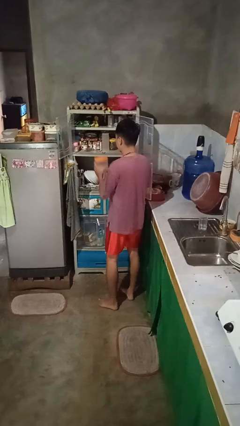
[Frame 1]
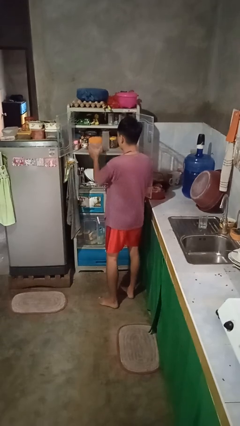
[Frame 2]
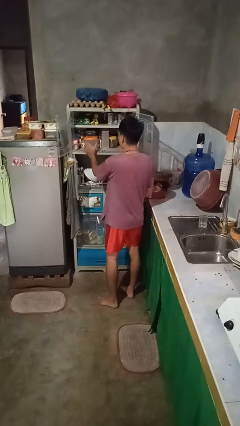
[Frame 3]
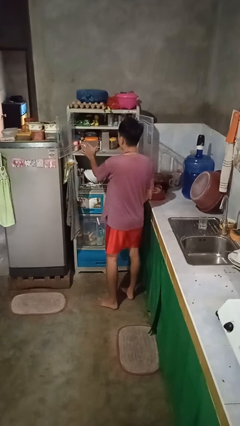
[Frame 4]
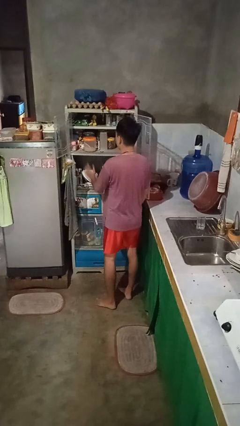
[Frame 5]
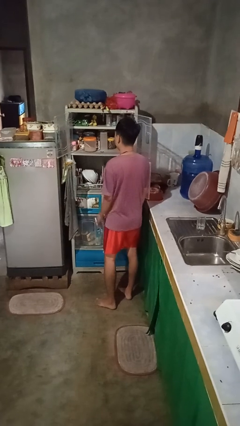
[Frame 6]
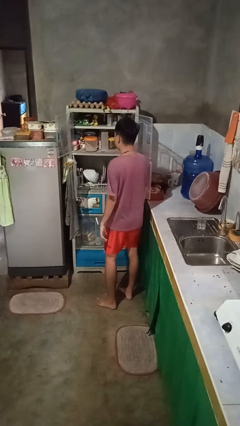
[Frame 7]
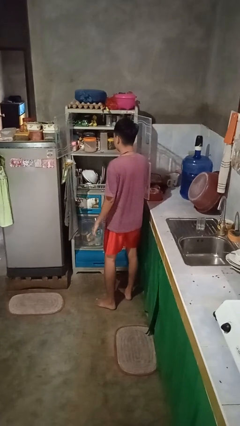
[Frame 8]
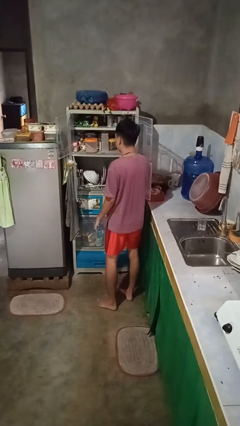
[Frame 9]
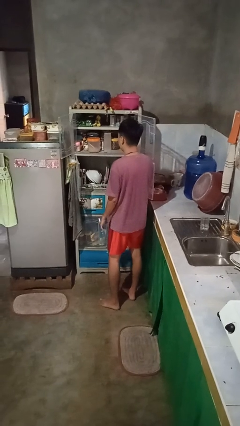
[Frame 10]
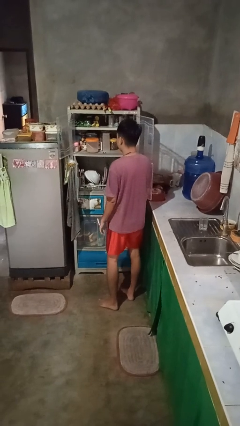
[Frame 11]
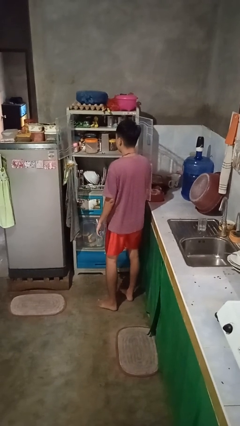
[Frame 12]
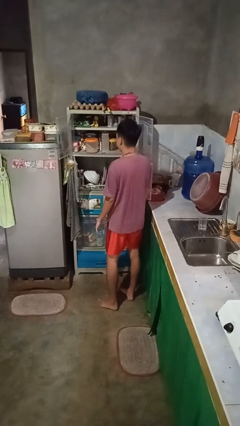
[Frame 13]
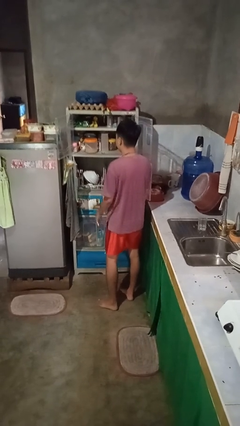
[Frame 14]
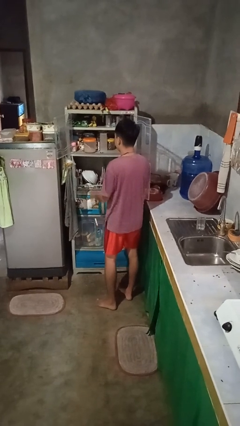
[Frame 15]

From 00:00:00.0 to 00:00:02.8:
person puts object in cabinet

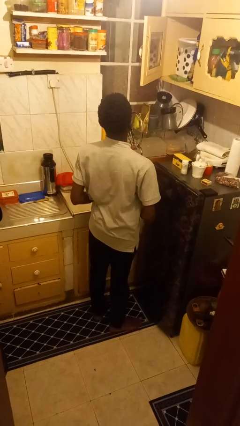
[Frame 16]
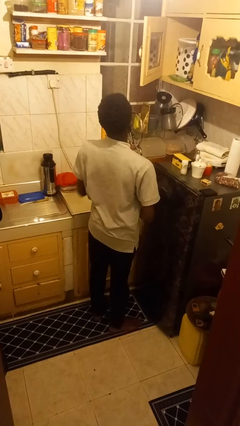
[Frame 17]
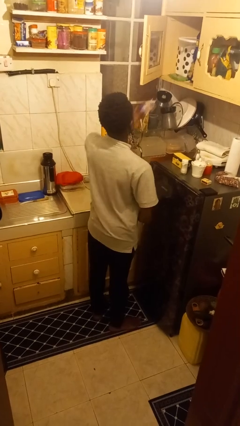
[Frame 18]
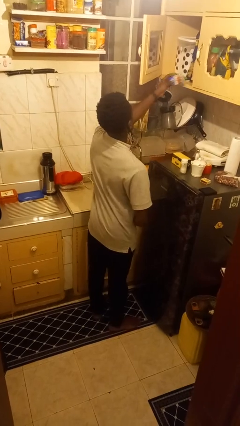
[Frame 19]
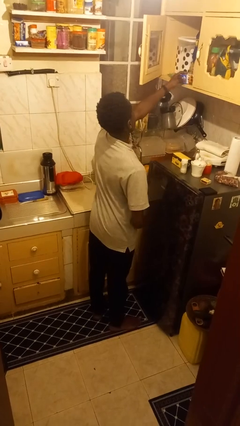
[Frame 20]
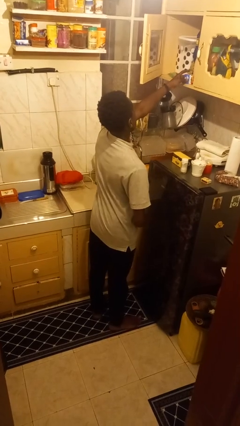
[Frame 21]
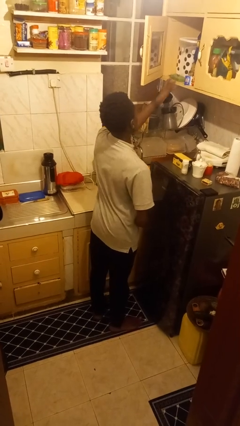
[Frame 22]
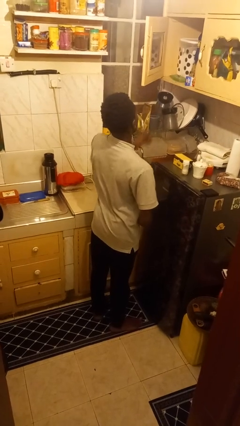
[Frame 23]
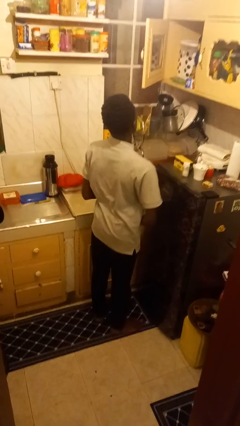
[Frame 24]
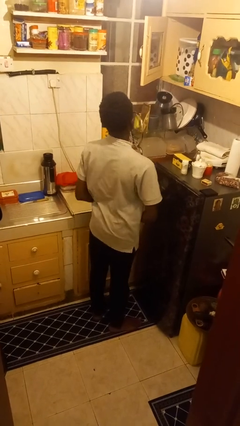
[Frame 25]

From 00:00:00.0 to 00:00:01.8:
person puts down object into cabinet

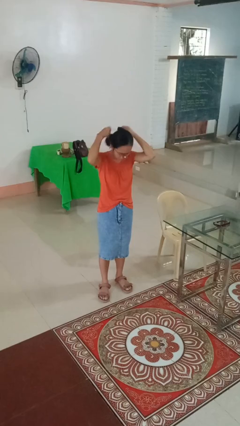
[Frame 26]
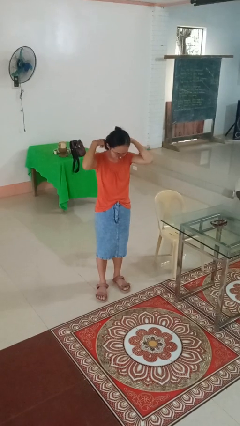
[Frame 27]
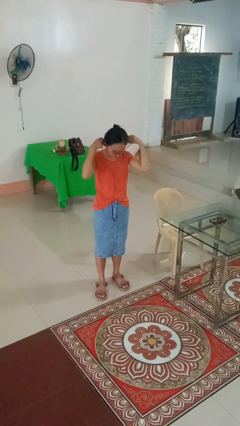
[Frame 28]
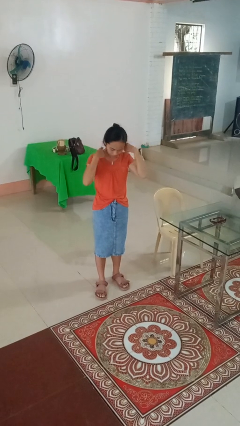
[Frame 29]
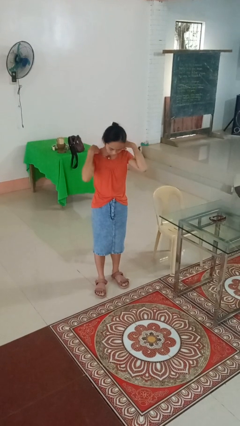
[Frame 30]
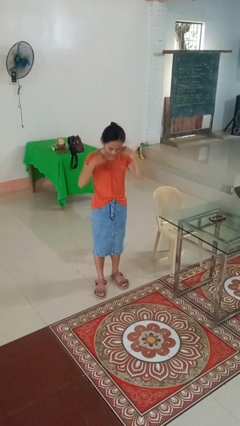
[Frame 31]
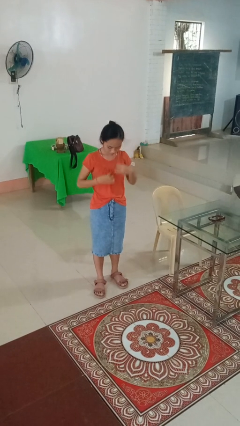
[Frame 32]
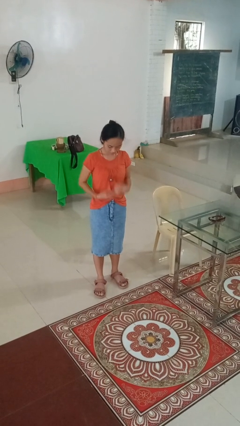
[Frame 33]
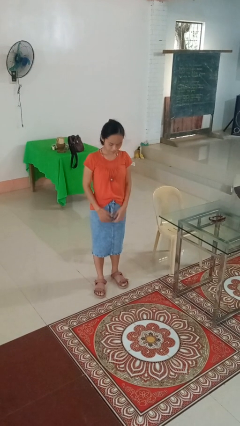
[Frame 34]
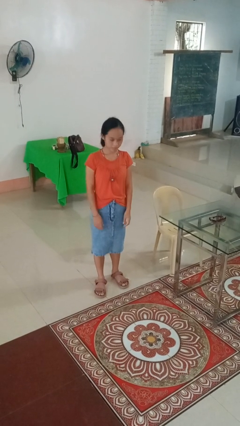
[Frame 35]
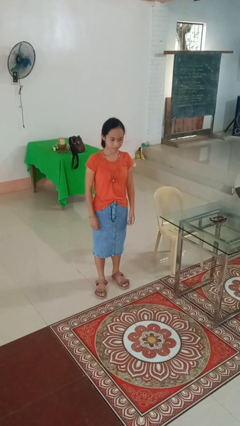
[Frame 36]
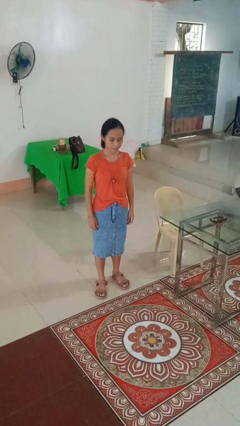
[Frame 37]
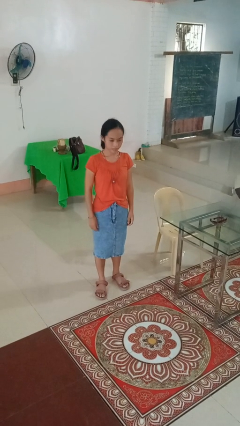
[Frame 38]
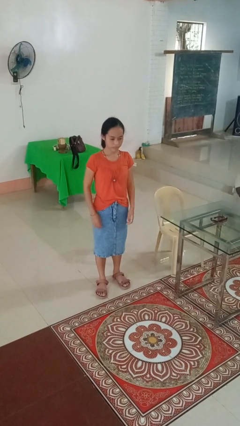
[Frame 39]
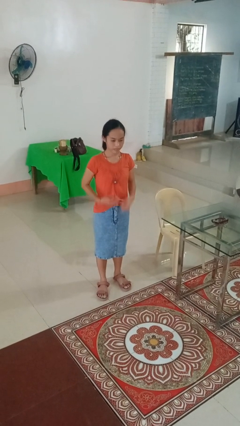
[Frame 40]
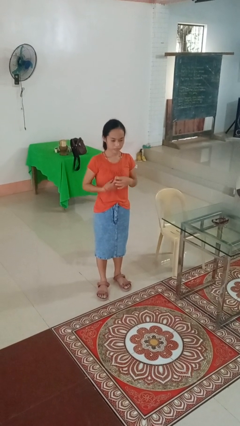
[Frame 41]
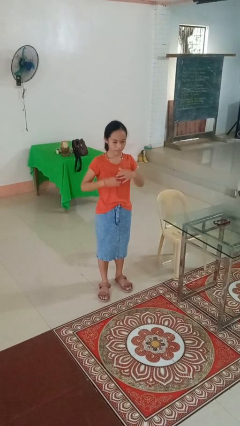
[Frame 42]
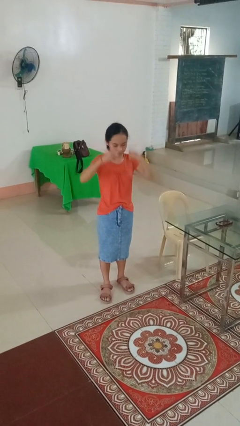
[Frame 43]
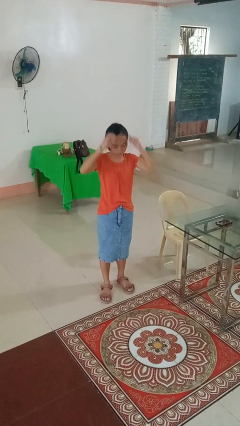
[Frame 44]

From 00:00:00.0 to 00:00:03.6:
person puts on necklace

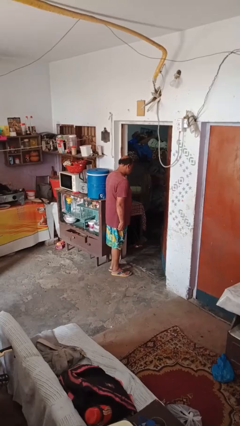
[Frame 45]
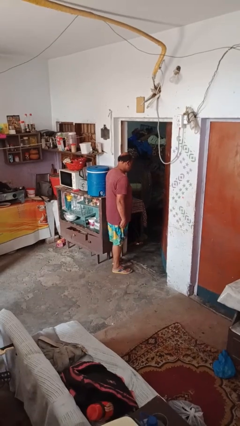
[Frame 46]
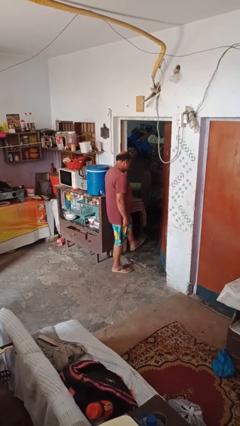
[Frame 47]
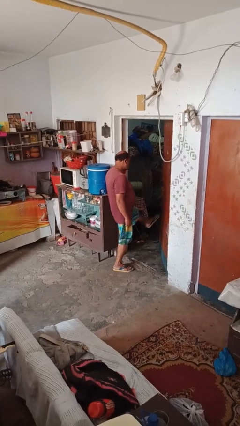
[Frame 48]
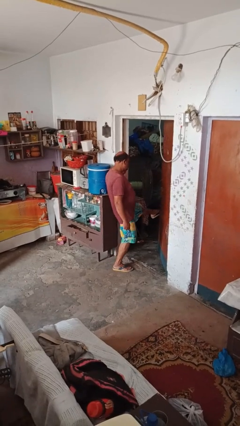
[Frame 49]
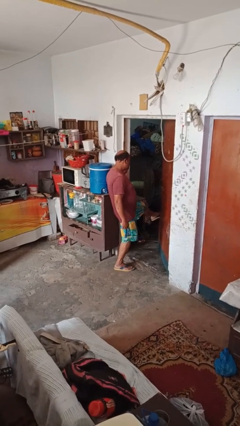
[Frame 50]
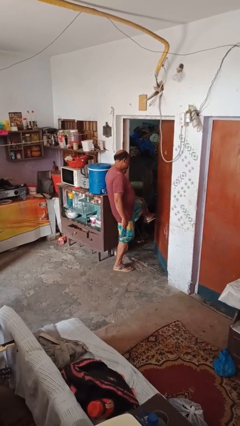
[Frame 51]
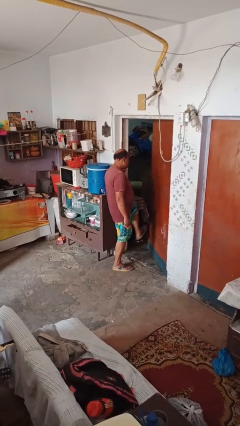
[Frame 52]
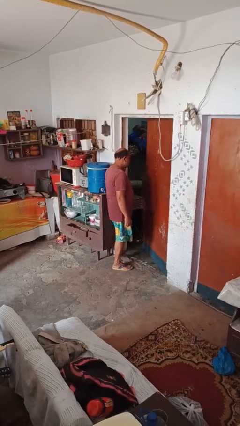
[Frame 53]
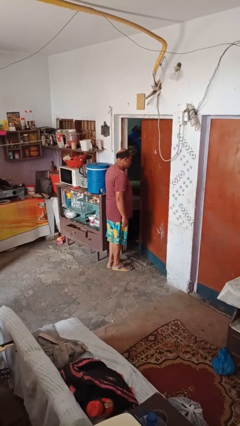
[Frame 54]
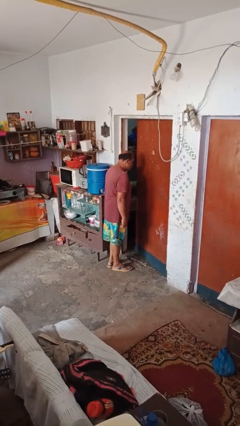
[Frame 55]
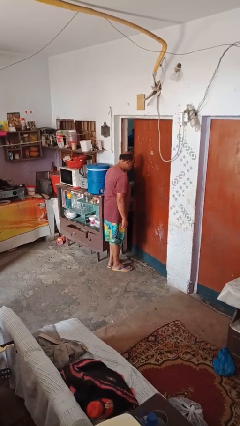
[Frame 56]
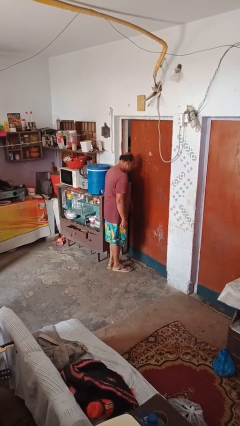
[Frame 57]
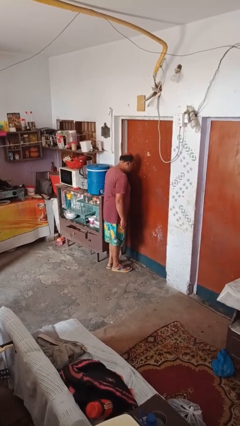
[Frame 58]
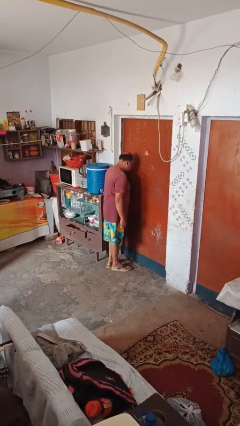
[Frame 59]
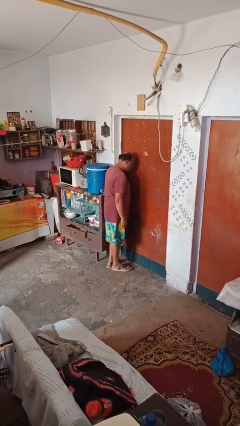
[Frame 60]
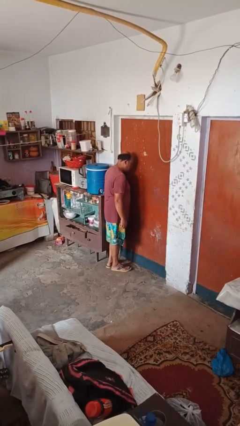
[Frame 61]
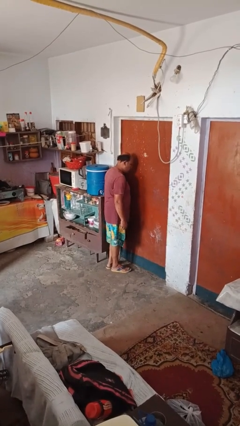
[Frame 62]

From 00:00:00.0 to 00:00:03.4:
person closes door with foot

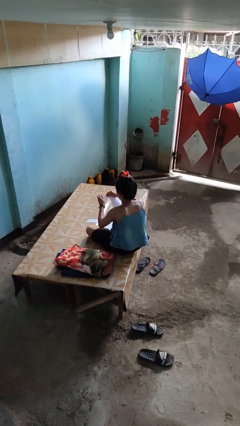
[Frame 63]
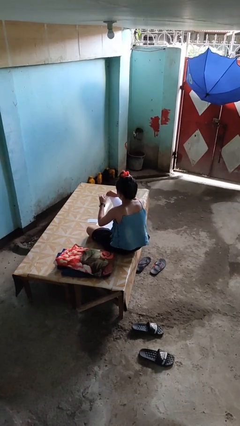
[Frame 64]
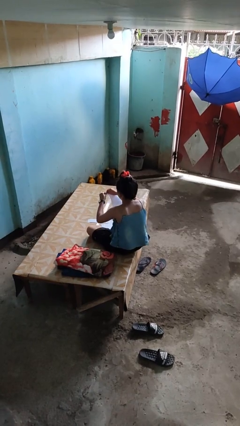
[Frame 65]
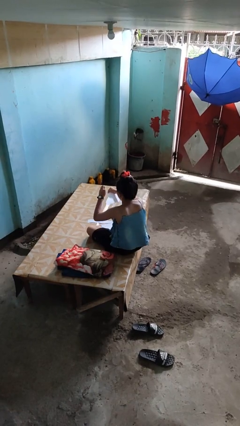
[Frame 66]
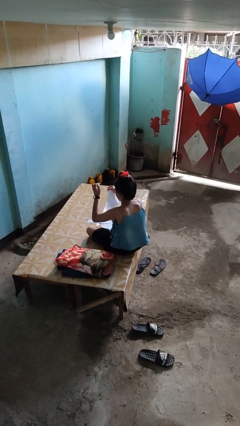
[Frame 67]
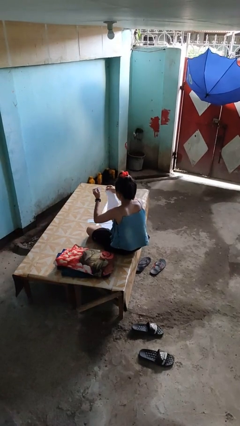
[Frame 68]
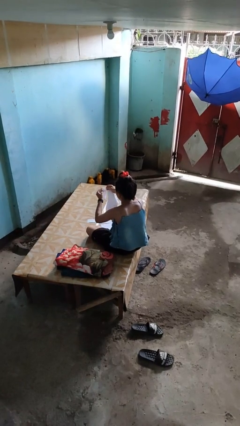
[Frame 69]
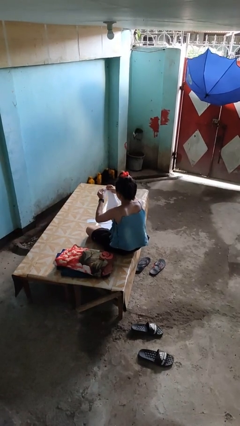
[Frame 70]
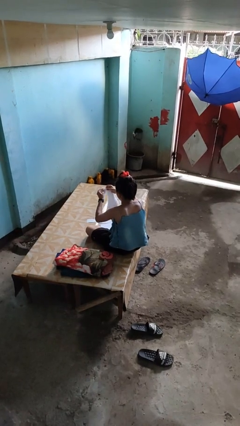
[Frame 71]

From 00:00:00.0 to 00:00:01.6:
person tears paper

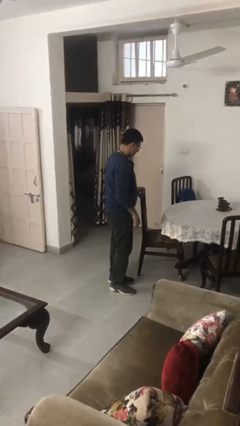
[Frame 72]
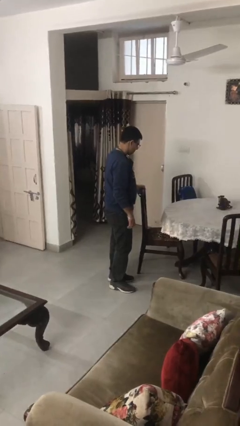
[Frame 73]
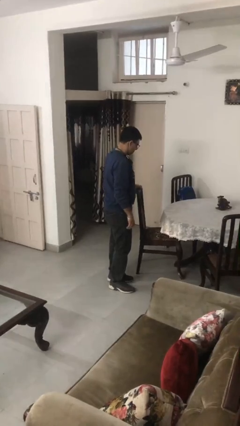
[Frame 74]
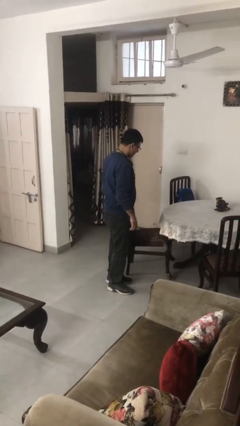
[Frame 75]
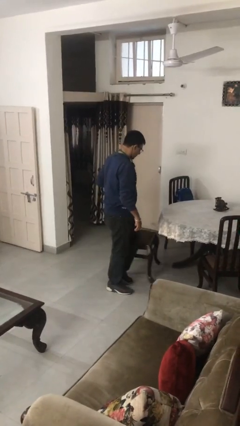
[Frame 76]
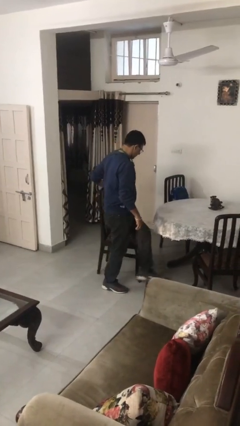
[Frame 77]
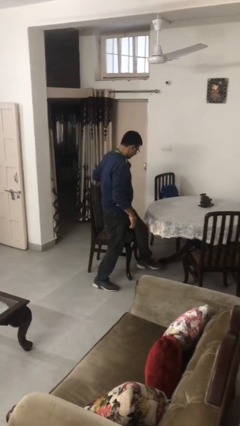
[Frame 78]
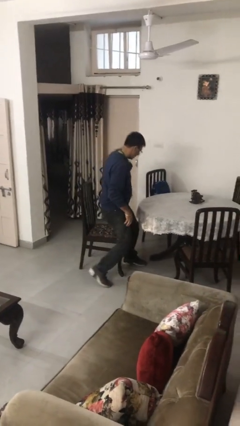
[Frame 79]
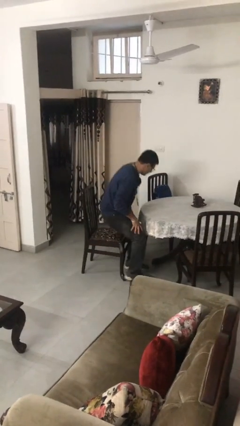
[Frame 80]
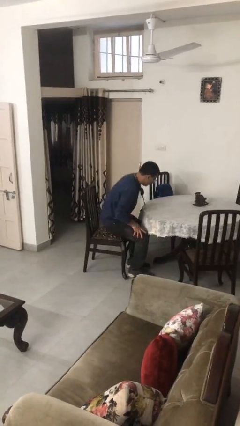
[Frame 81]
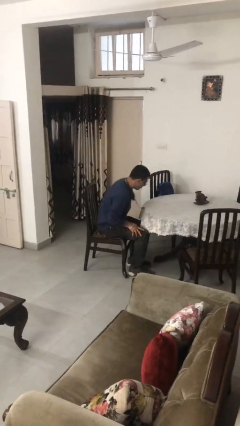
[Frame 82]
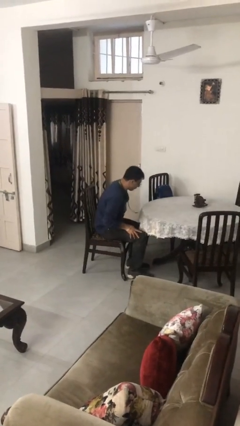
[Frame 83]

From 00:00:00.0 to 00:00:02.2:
person sits down

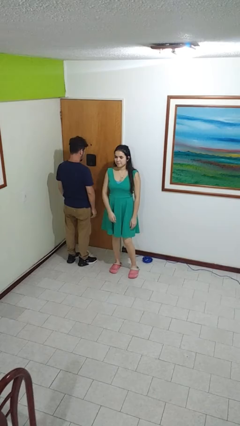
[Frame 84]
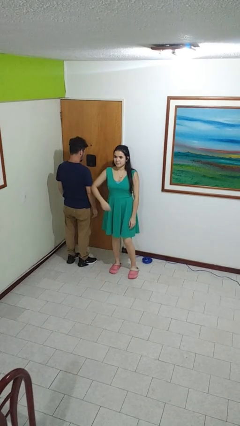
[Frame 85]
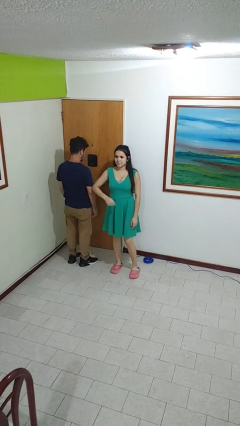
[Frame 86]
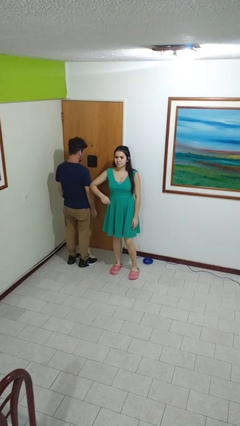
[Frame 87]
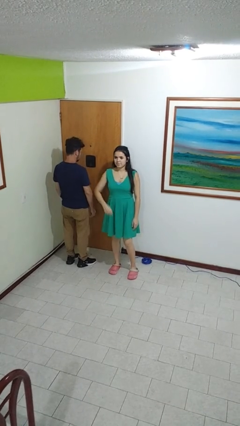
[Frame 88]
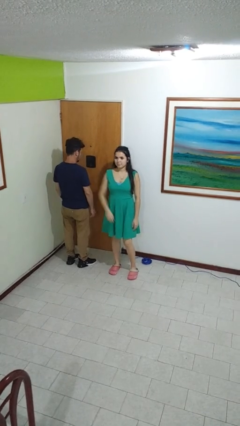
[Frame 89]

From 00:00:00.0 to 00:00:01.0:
person nudges person with elbow

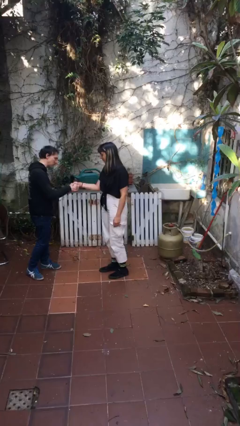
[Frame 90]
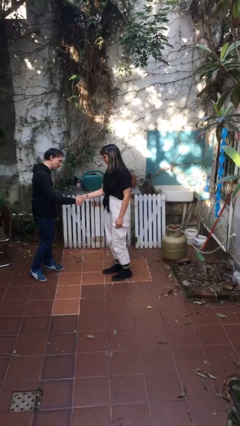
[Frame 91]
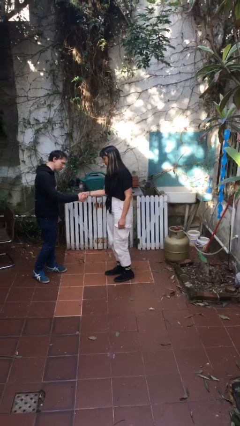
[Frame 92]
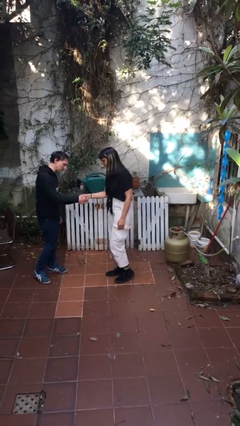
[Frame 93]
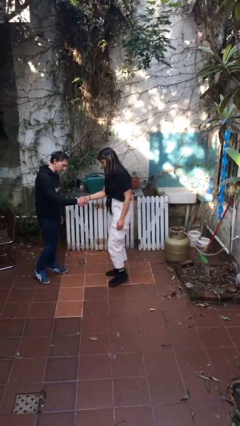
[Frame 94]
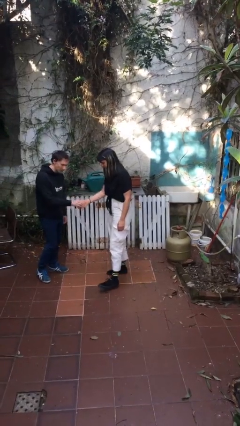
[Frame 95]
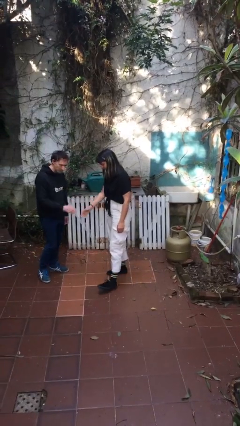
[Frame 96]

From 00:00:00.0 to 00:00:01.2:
person shakes hand
